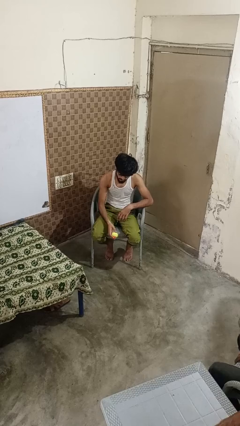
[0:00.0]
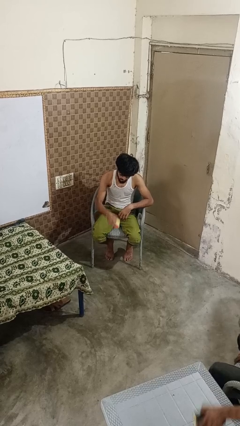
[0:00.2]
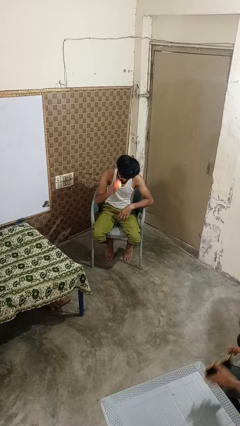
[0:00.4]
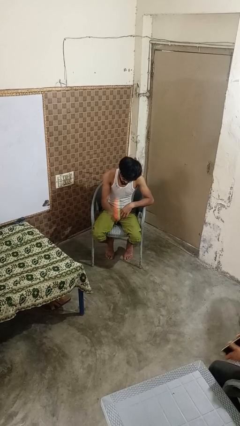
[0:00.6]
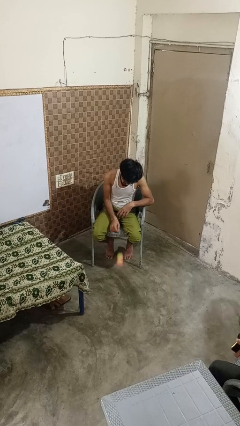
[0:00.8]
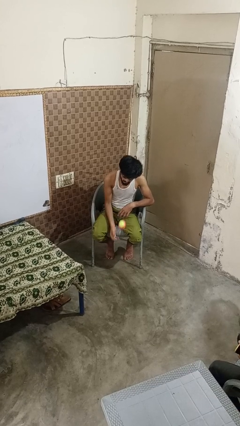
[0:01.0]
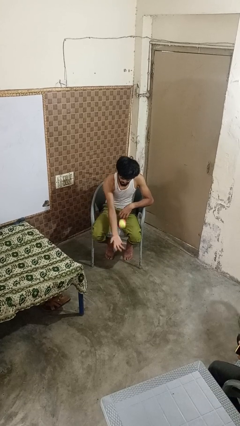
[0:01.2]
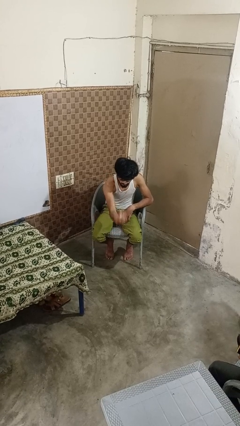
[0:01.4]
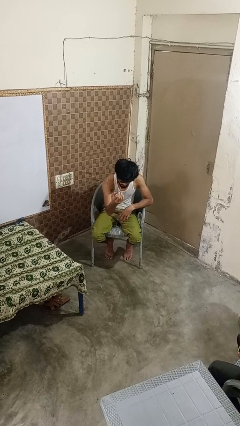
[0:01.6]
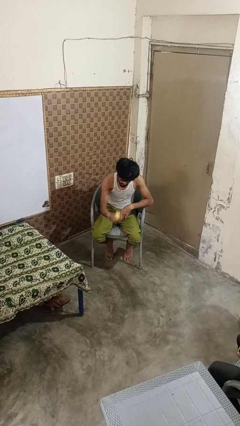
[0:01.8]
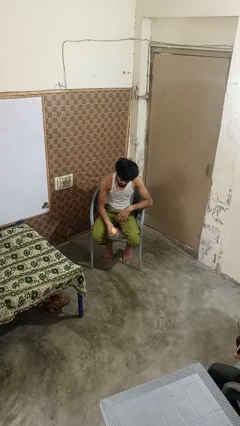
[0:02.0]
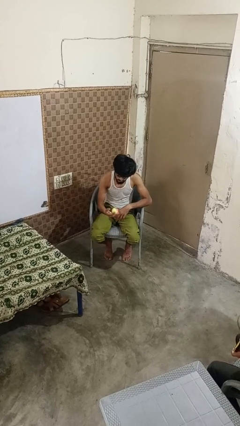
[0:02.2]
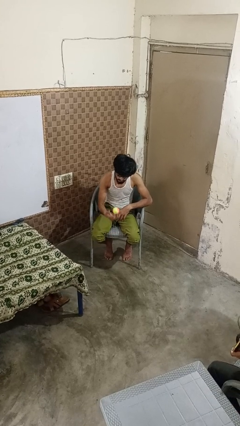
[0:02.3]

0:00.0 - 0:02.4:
person bounces ball on floor

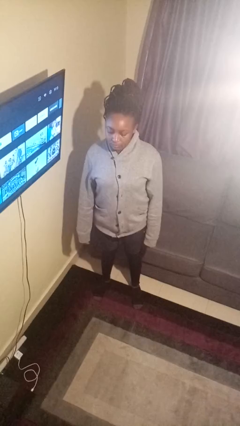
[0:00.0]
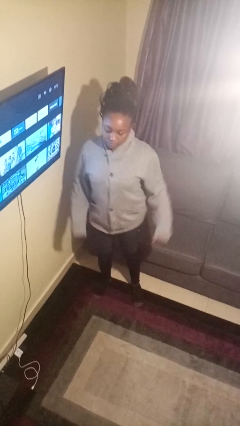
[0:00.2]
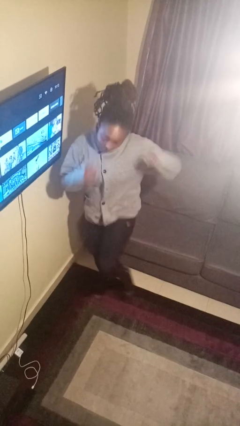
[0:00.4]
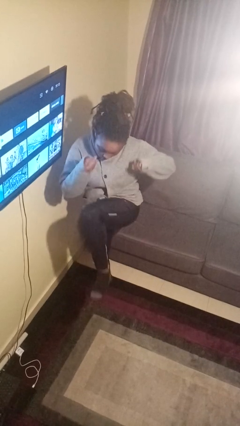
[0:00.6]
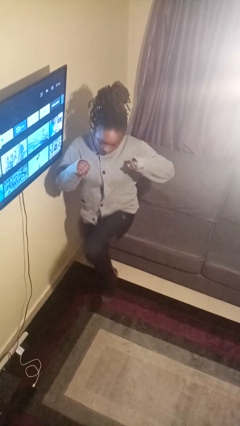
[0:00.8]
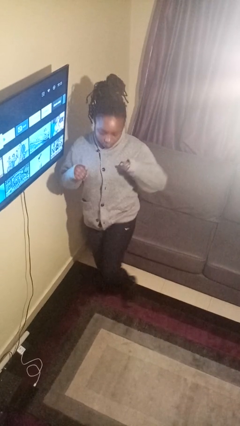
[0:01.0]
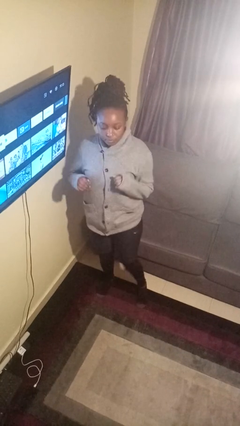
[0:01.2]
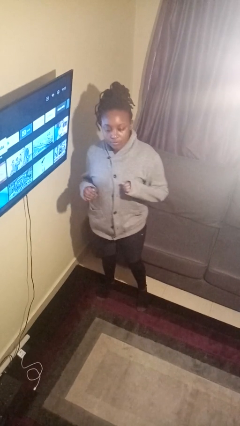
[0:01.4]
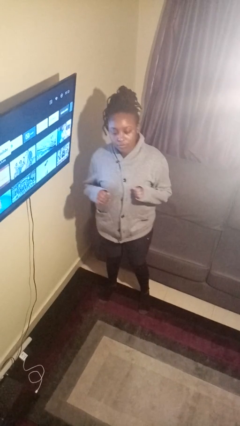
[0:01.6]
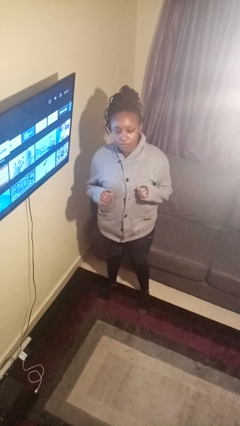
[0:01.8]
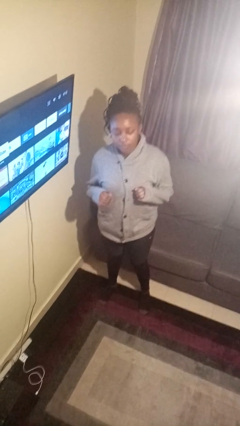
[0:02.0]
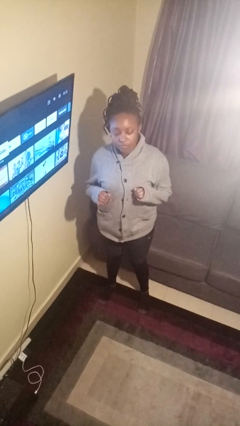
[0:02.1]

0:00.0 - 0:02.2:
person karate kicks

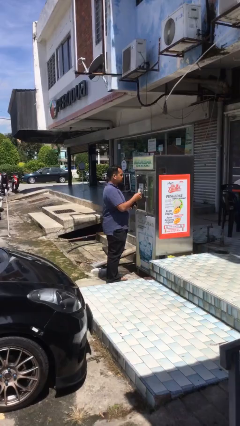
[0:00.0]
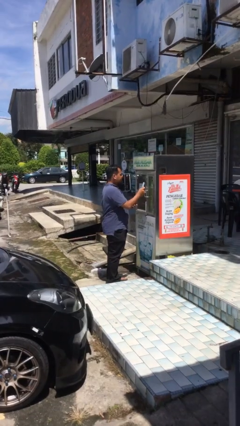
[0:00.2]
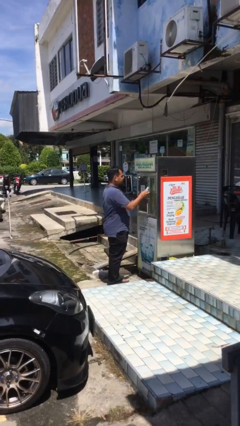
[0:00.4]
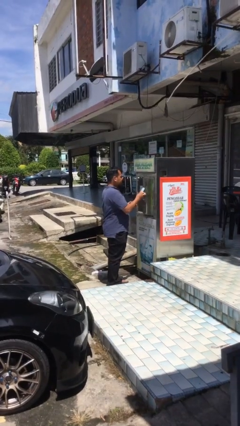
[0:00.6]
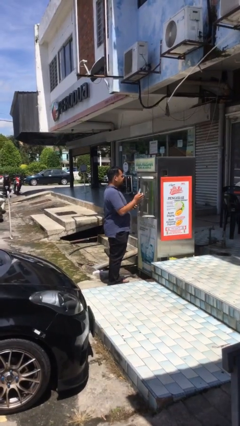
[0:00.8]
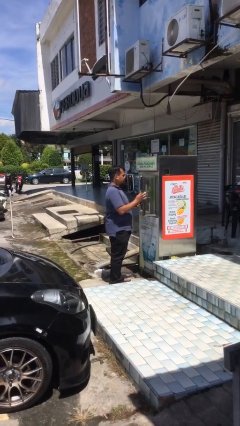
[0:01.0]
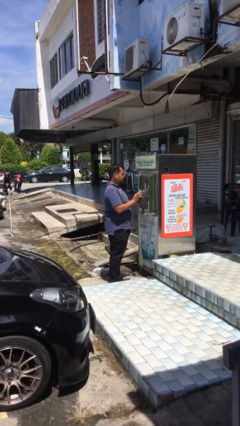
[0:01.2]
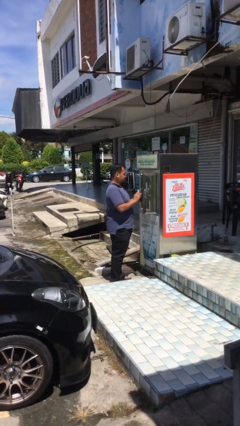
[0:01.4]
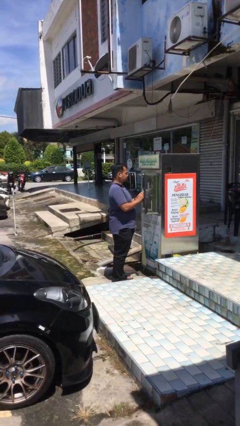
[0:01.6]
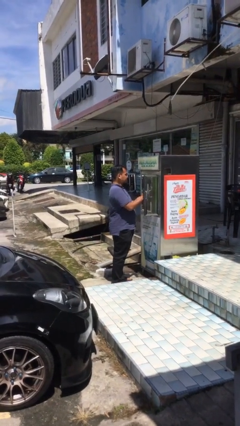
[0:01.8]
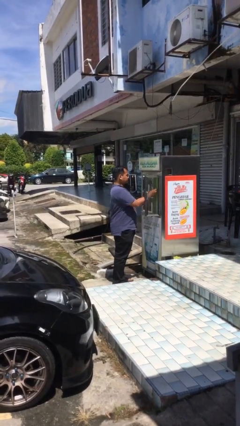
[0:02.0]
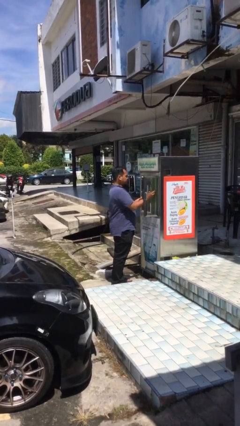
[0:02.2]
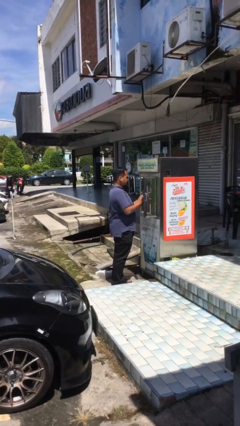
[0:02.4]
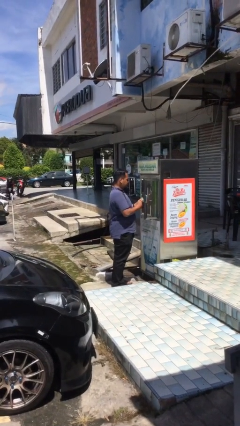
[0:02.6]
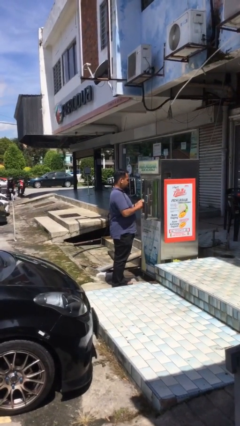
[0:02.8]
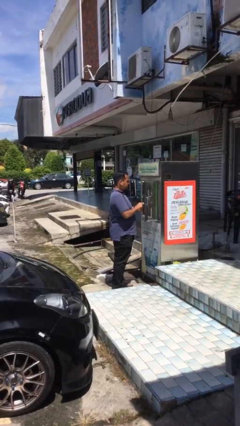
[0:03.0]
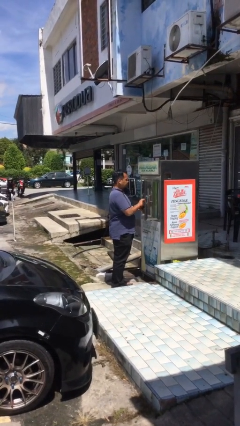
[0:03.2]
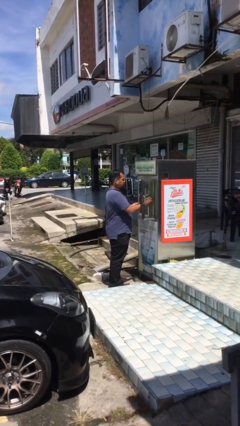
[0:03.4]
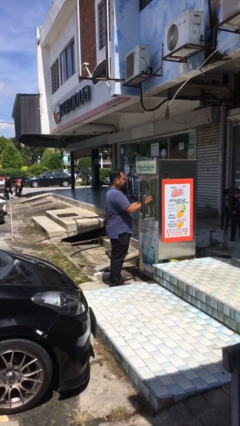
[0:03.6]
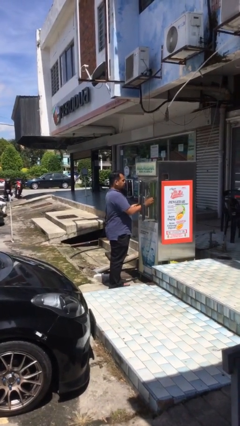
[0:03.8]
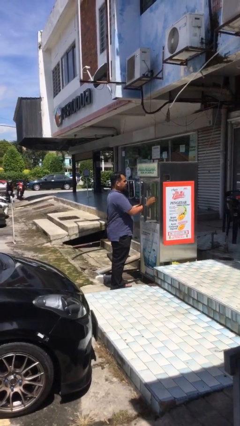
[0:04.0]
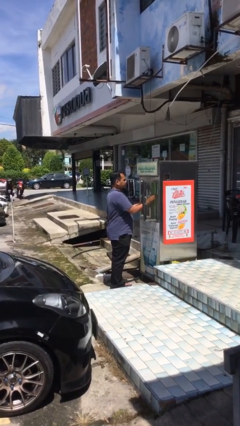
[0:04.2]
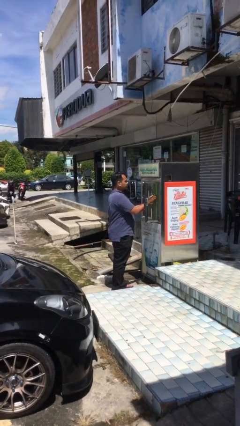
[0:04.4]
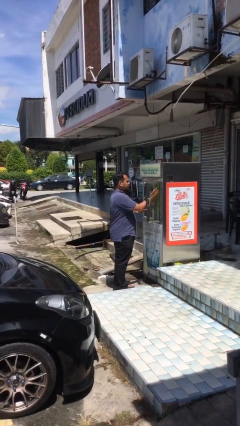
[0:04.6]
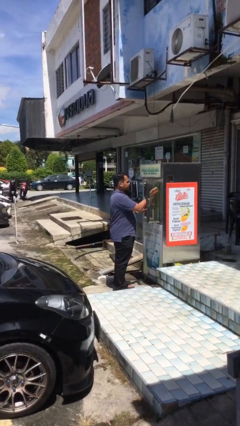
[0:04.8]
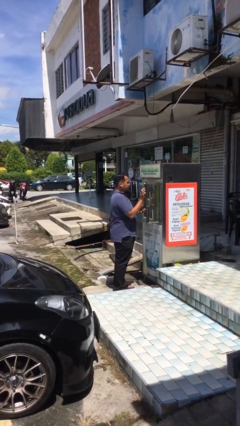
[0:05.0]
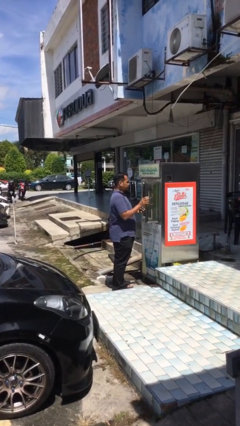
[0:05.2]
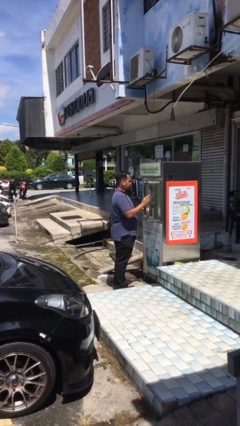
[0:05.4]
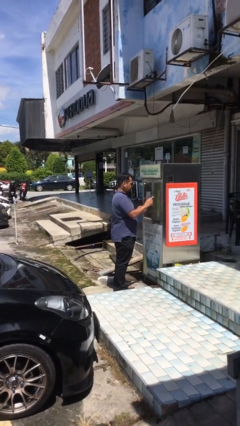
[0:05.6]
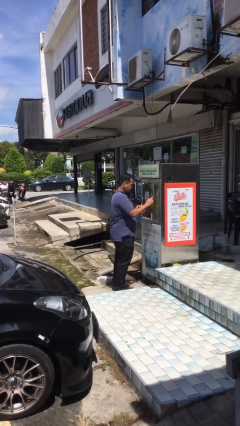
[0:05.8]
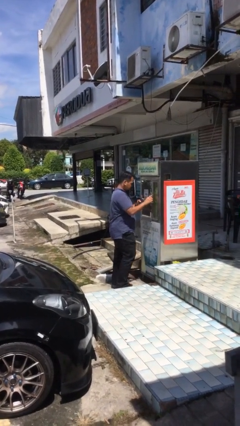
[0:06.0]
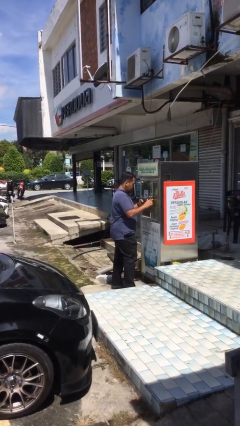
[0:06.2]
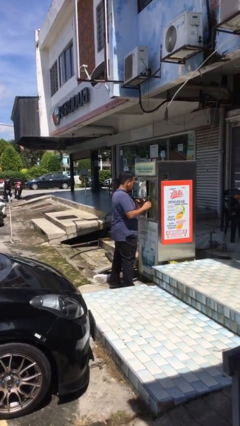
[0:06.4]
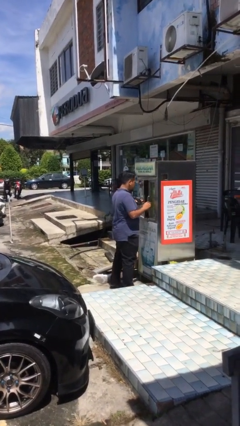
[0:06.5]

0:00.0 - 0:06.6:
person purchases from machine

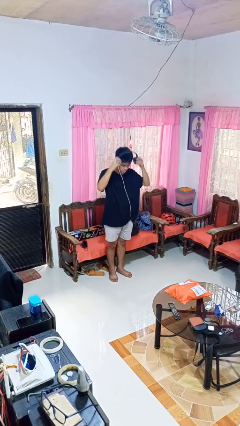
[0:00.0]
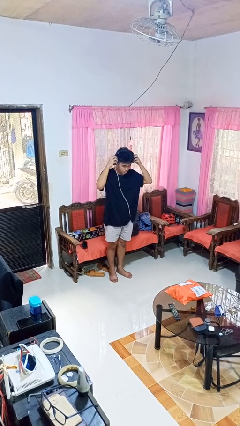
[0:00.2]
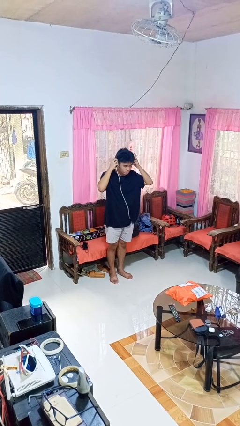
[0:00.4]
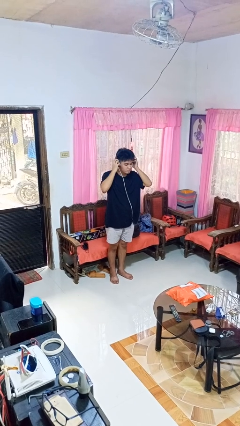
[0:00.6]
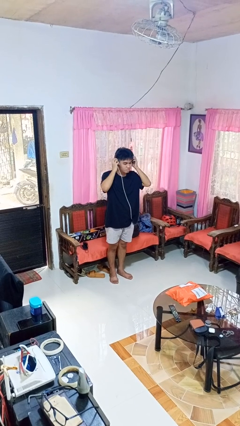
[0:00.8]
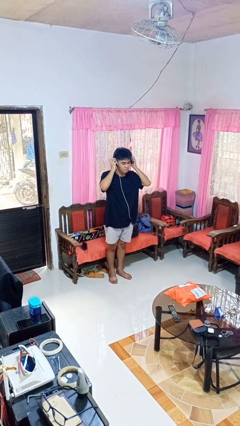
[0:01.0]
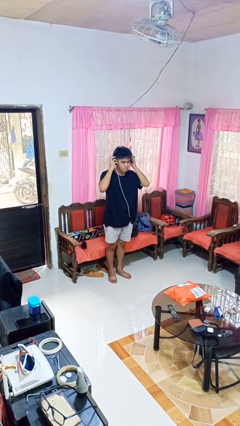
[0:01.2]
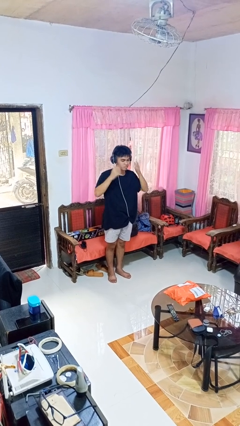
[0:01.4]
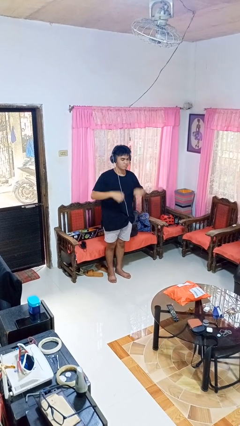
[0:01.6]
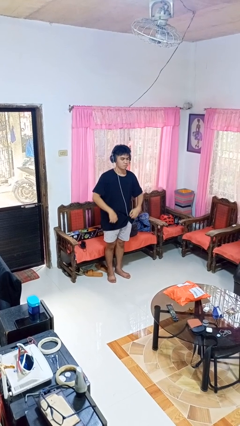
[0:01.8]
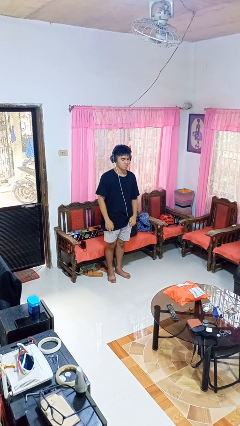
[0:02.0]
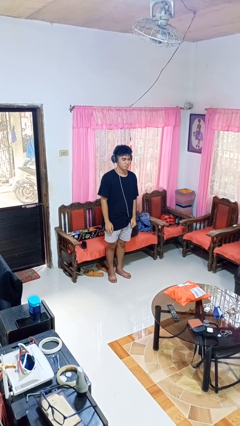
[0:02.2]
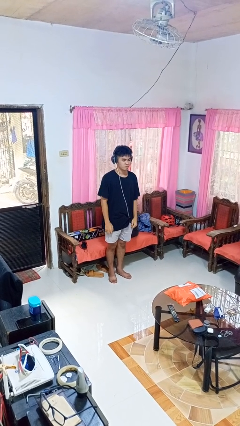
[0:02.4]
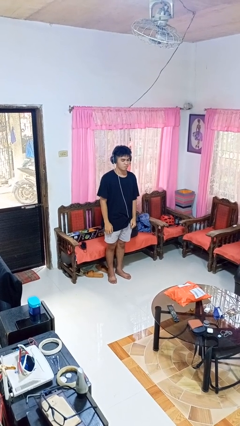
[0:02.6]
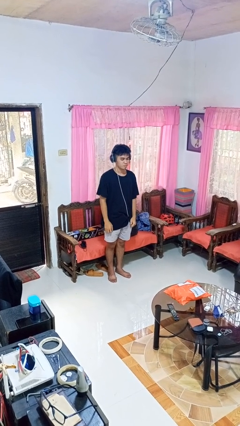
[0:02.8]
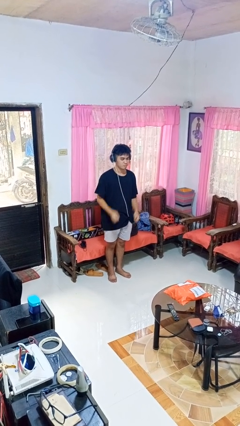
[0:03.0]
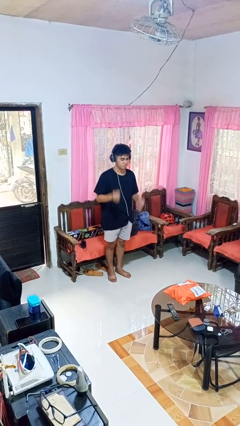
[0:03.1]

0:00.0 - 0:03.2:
person puts on headphones

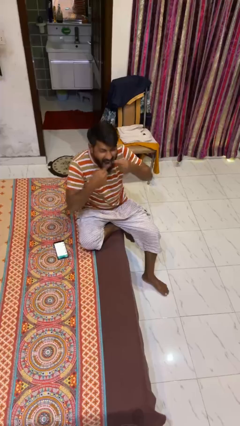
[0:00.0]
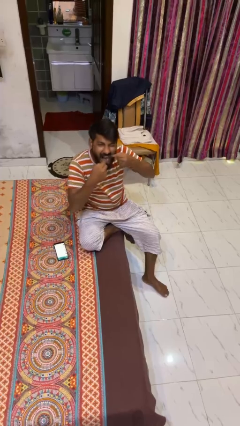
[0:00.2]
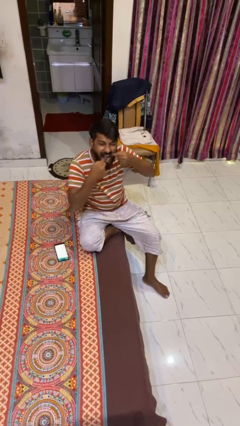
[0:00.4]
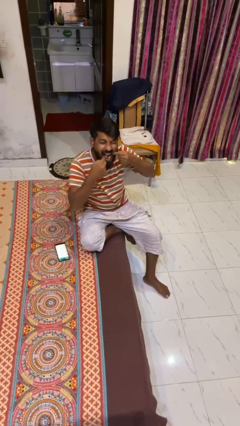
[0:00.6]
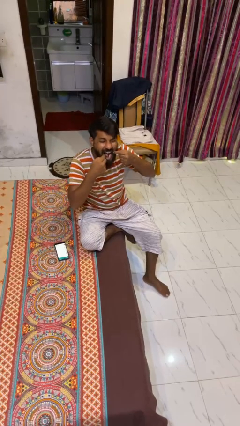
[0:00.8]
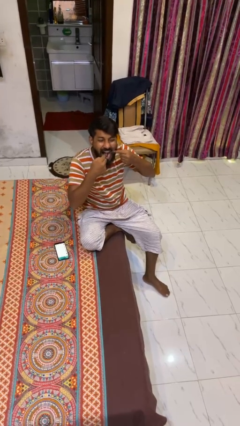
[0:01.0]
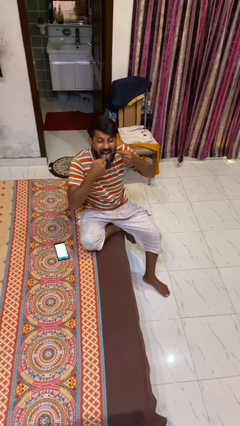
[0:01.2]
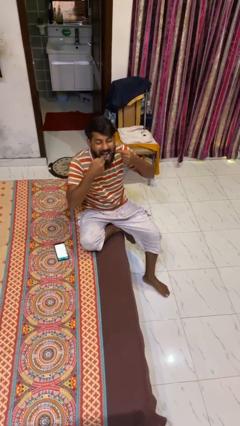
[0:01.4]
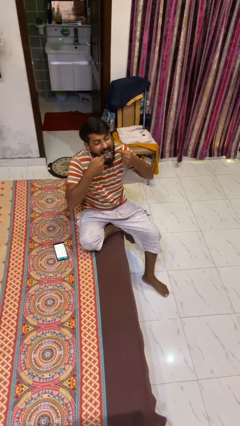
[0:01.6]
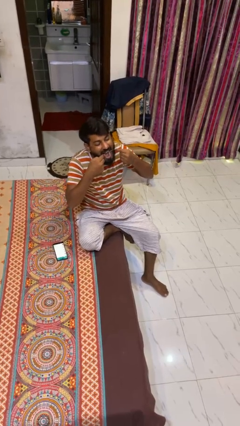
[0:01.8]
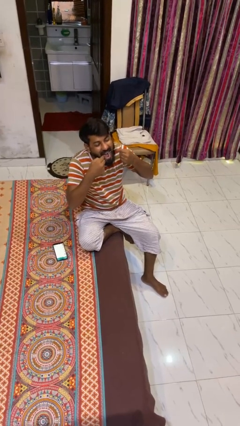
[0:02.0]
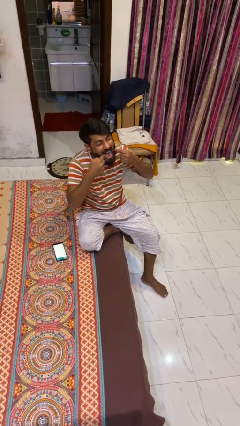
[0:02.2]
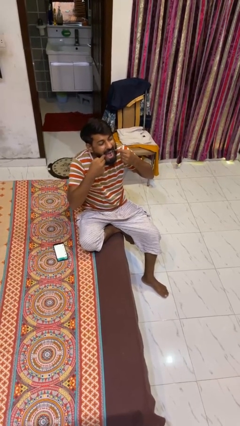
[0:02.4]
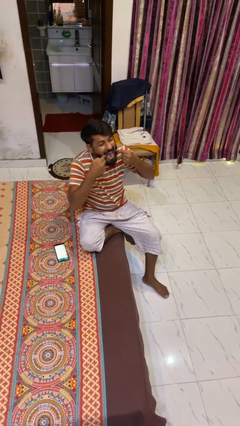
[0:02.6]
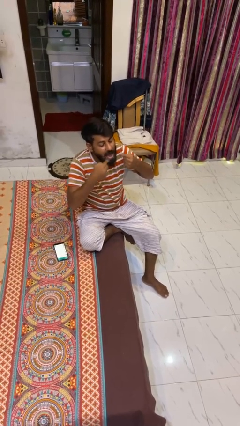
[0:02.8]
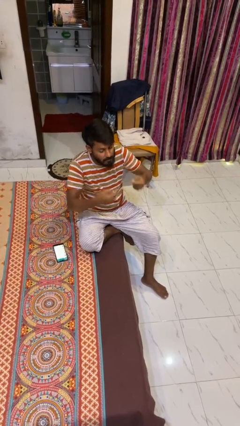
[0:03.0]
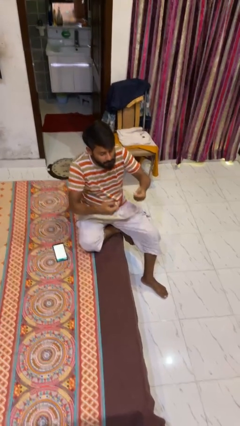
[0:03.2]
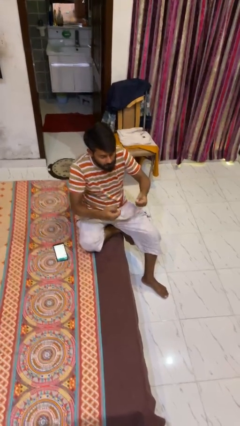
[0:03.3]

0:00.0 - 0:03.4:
person flosses
